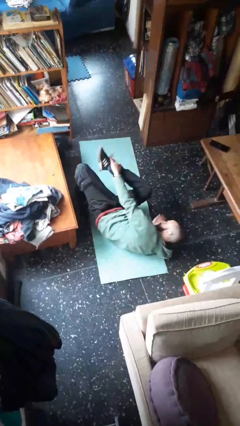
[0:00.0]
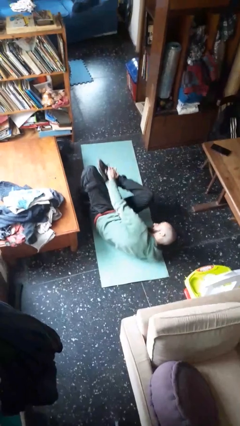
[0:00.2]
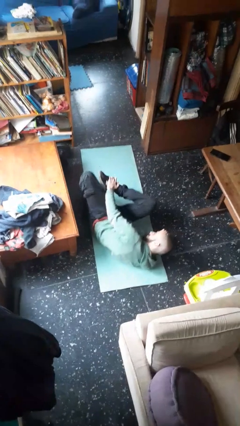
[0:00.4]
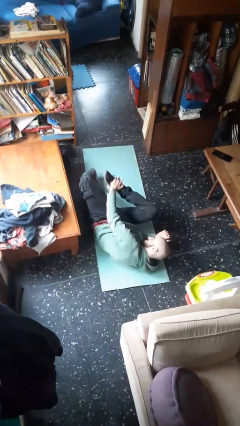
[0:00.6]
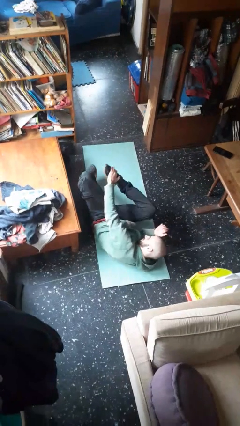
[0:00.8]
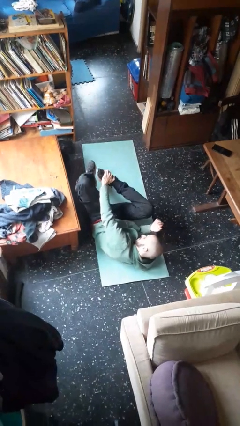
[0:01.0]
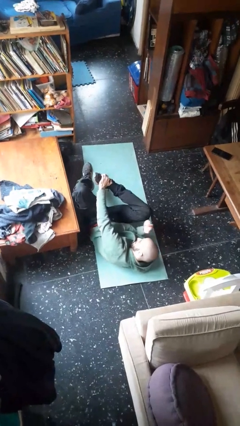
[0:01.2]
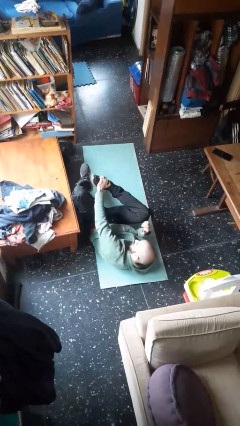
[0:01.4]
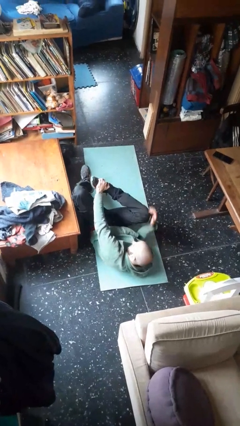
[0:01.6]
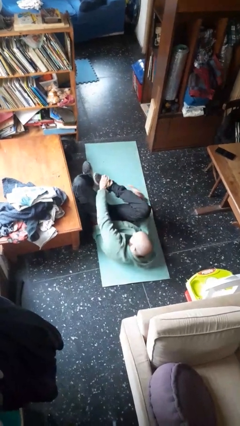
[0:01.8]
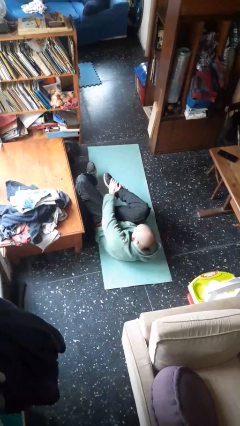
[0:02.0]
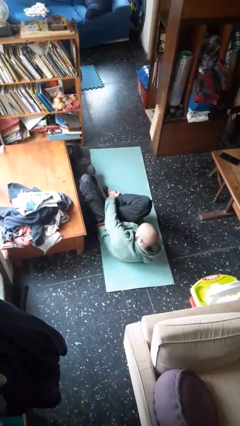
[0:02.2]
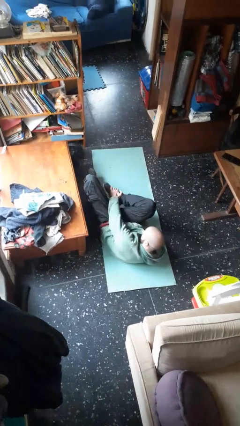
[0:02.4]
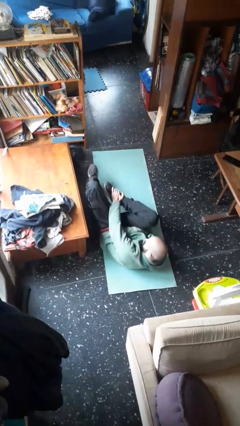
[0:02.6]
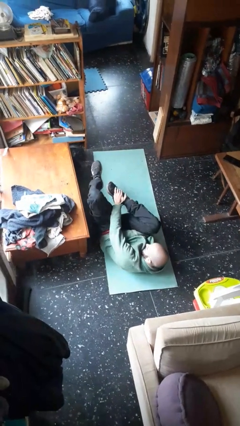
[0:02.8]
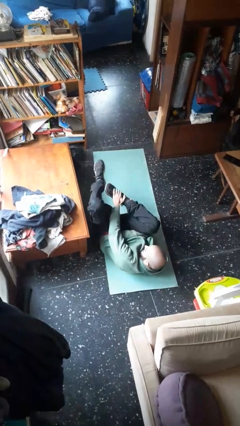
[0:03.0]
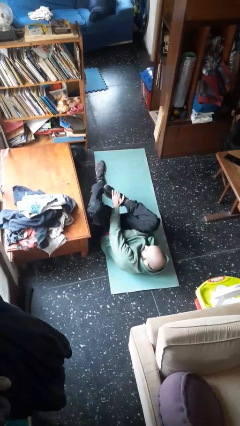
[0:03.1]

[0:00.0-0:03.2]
person lies down on floor

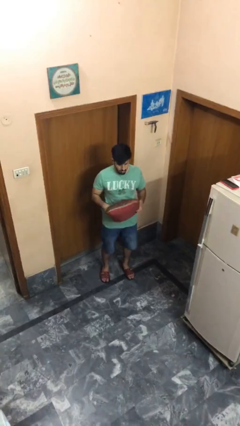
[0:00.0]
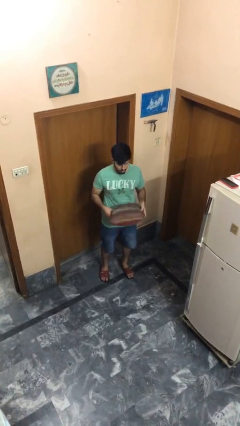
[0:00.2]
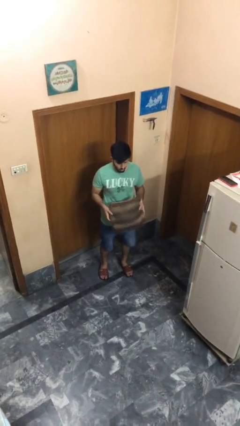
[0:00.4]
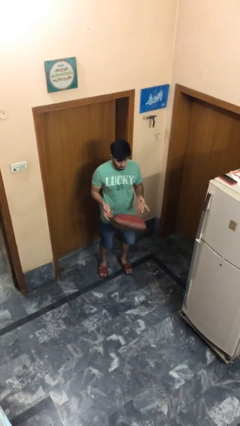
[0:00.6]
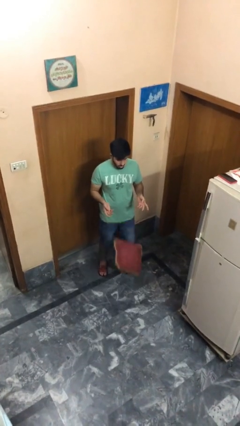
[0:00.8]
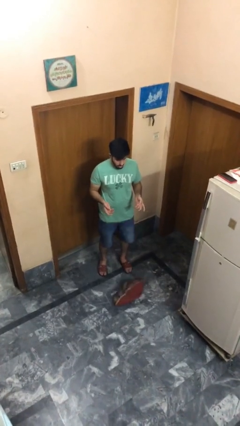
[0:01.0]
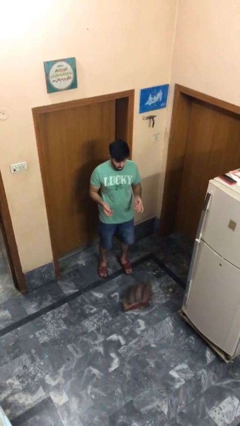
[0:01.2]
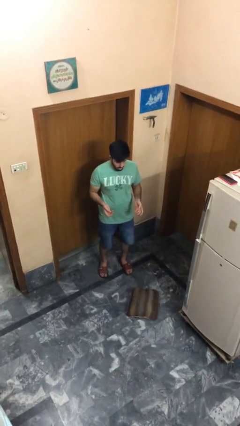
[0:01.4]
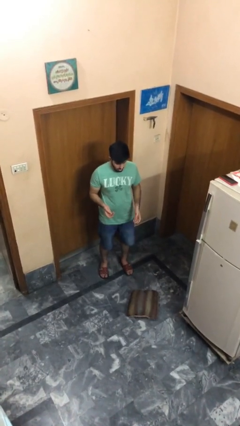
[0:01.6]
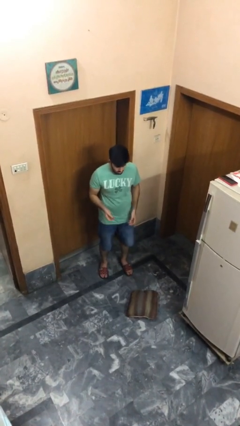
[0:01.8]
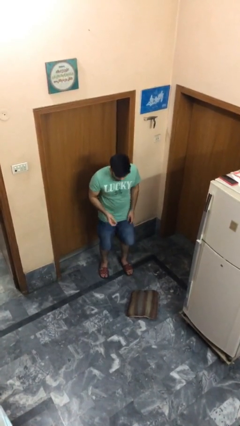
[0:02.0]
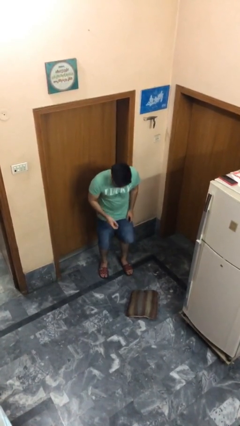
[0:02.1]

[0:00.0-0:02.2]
person drops object

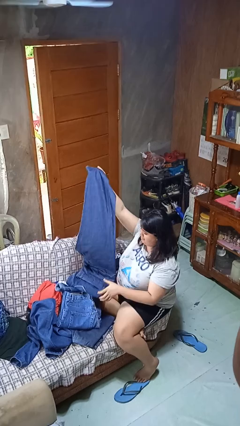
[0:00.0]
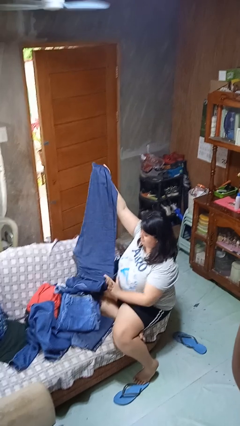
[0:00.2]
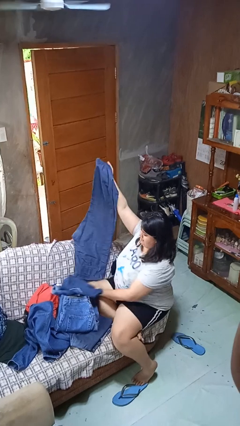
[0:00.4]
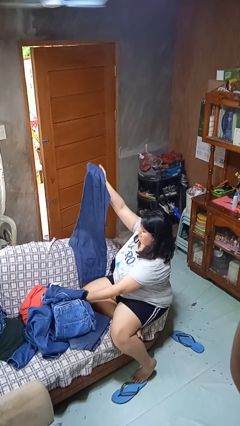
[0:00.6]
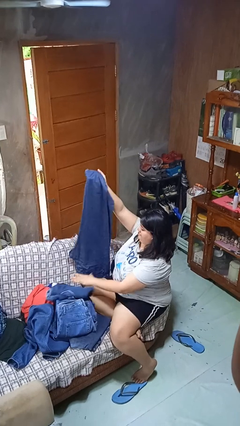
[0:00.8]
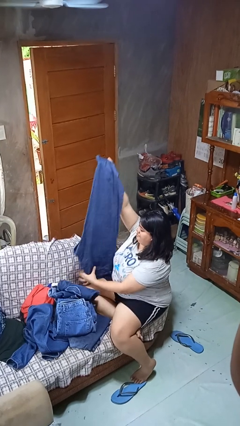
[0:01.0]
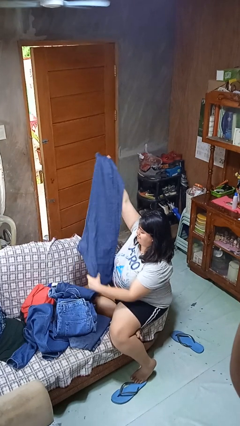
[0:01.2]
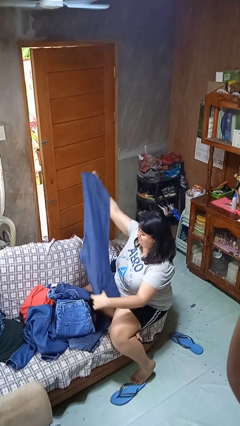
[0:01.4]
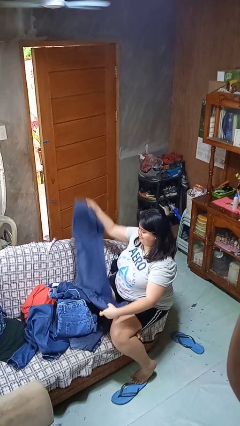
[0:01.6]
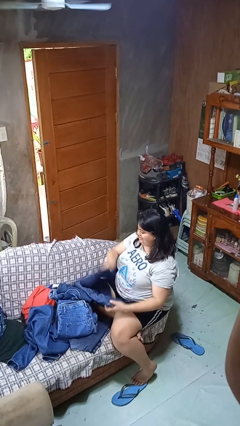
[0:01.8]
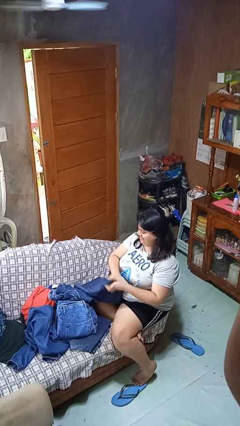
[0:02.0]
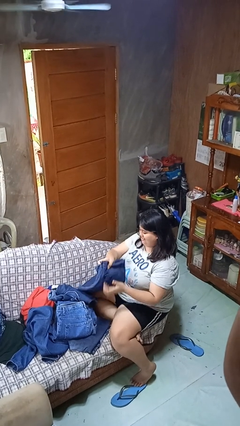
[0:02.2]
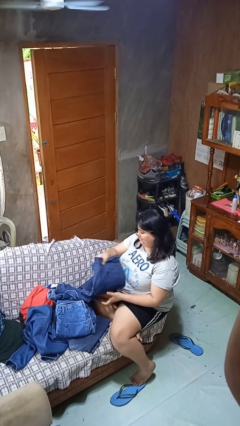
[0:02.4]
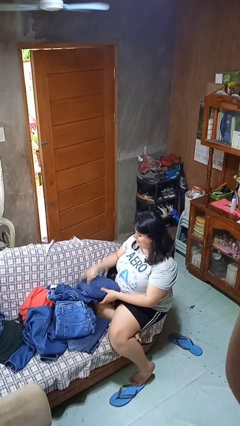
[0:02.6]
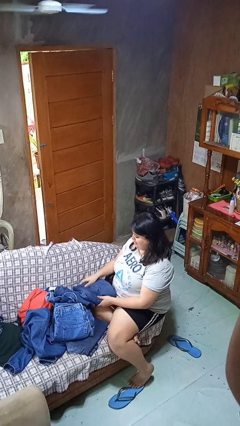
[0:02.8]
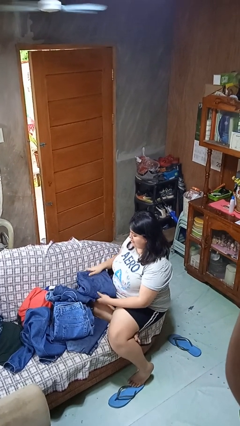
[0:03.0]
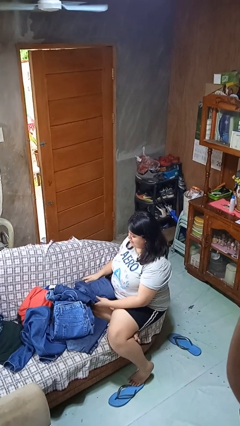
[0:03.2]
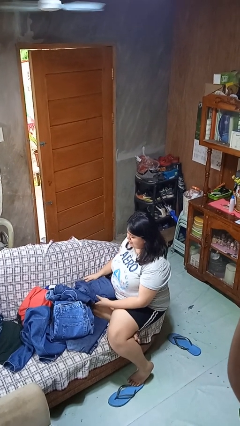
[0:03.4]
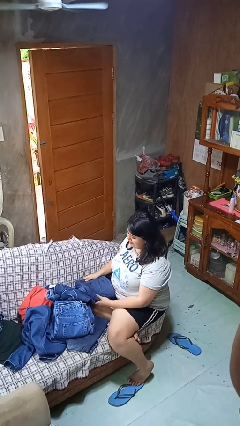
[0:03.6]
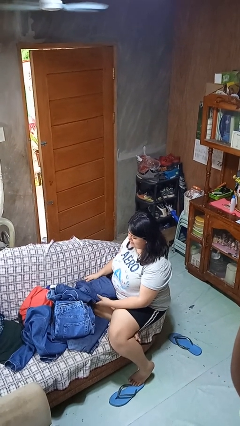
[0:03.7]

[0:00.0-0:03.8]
person folds pants

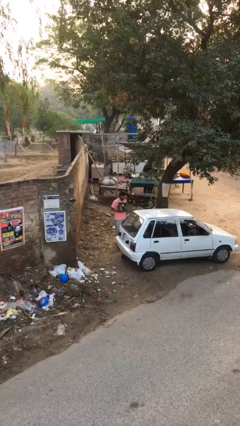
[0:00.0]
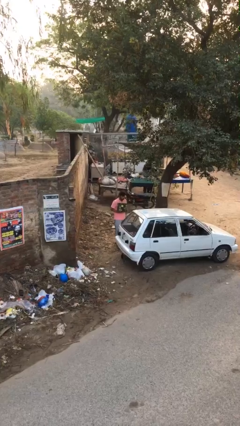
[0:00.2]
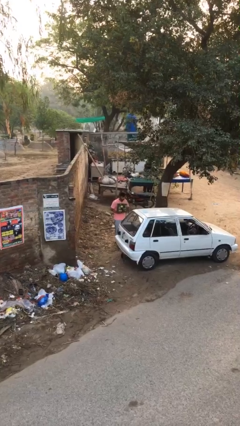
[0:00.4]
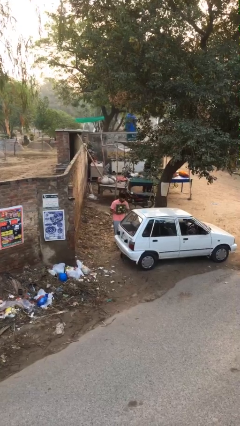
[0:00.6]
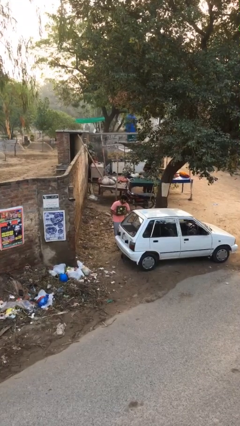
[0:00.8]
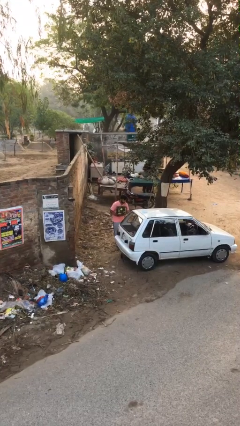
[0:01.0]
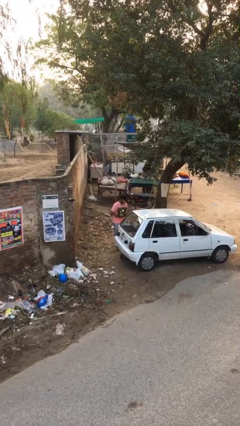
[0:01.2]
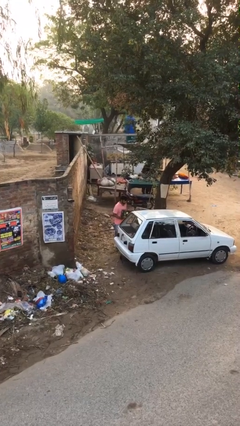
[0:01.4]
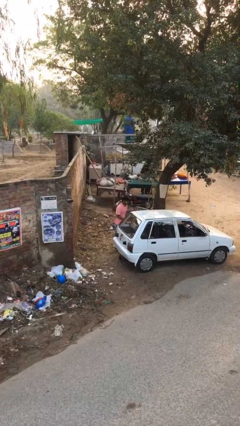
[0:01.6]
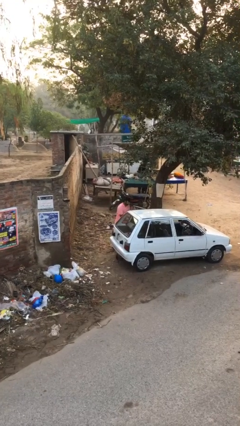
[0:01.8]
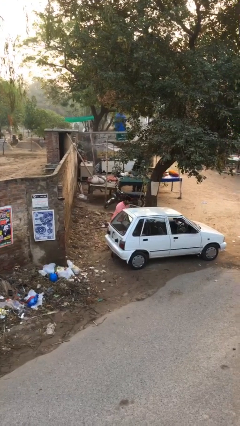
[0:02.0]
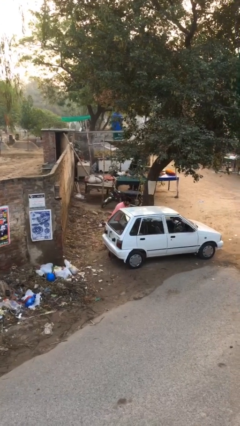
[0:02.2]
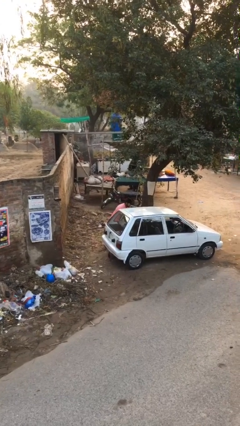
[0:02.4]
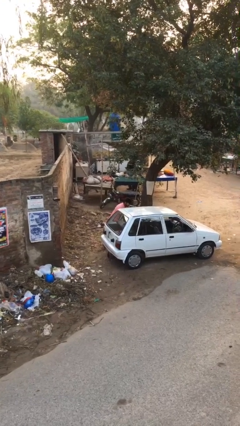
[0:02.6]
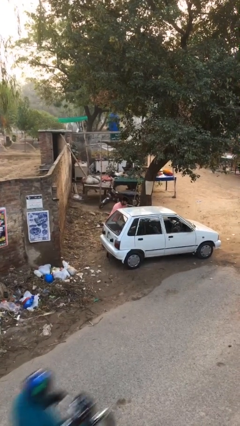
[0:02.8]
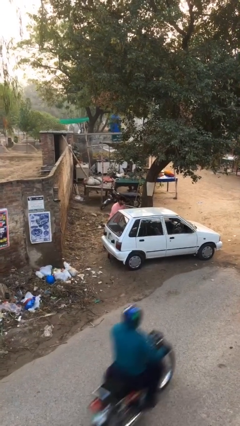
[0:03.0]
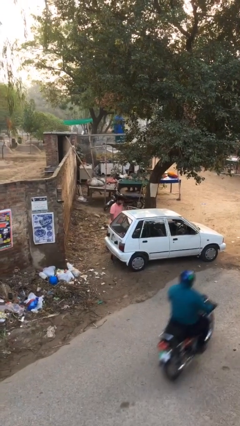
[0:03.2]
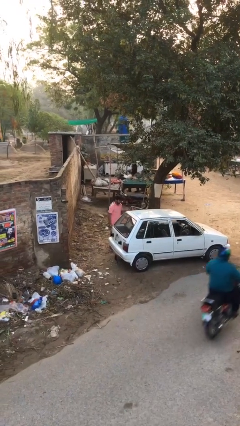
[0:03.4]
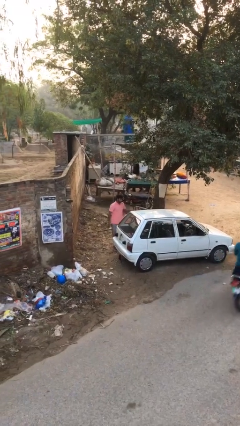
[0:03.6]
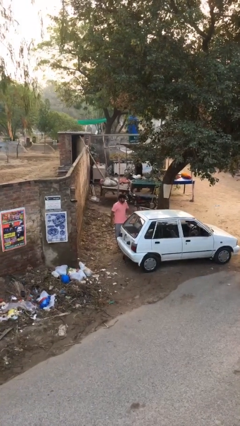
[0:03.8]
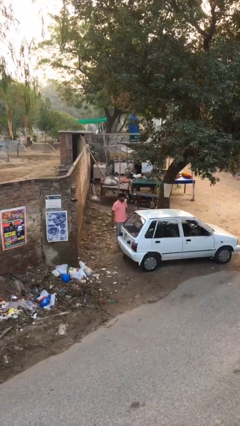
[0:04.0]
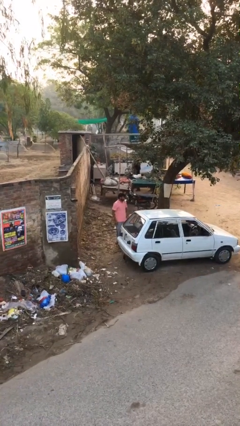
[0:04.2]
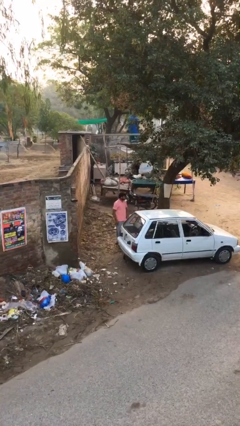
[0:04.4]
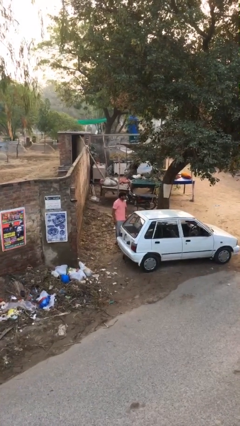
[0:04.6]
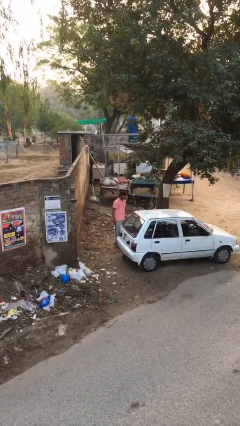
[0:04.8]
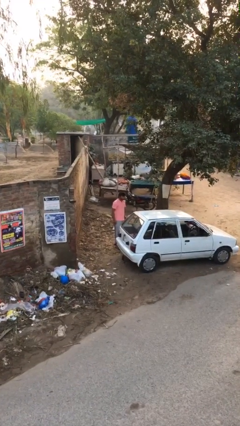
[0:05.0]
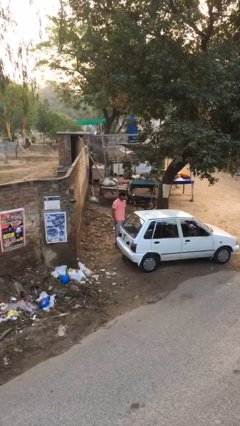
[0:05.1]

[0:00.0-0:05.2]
person loads car

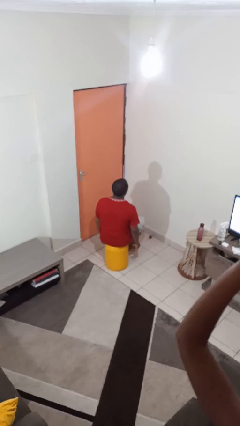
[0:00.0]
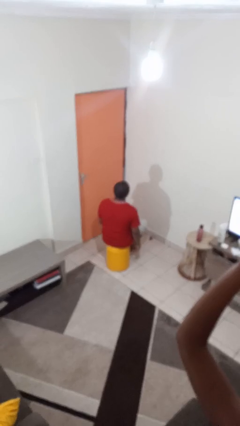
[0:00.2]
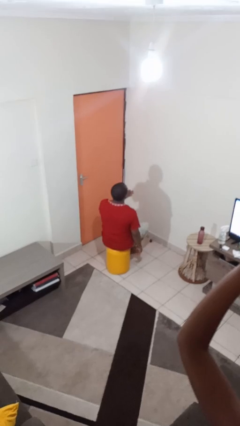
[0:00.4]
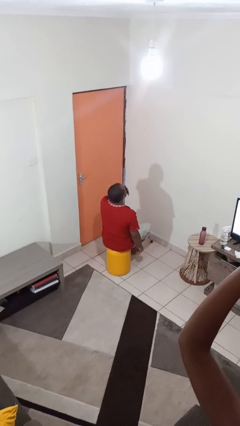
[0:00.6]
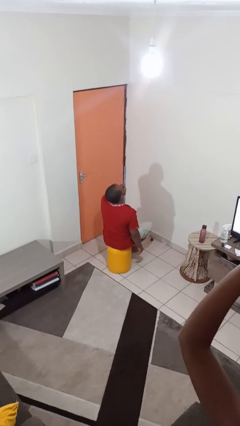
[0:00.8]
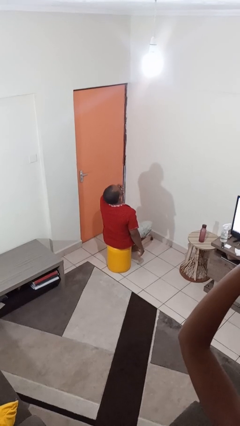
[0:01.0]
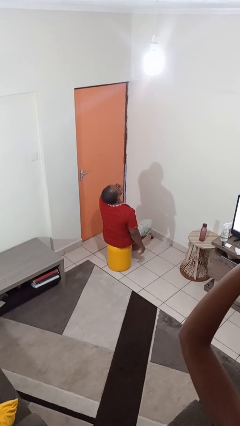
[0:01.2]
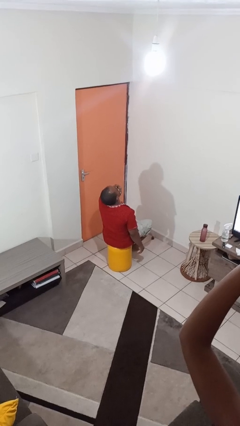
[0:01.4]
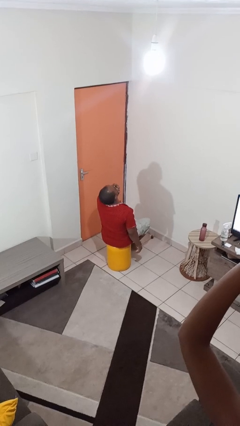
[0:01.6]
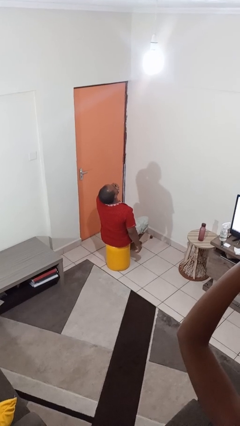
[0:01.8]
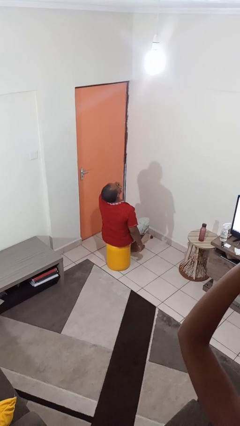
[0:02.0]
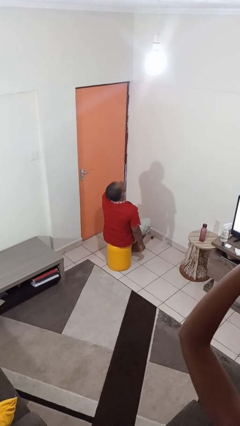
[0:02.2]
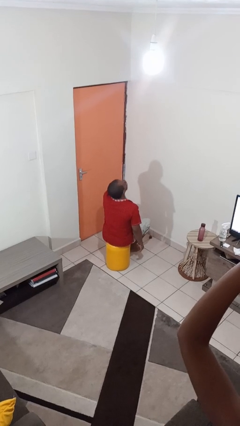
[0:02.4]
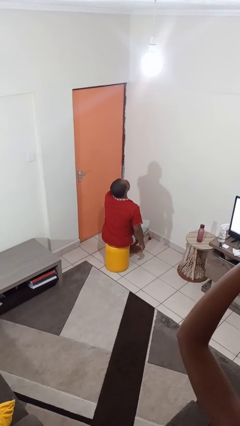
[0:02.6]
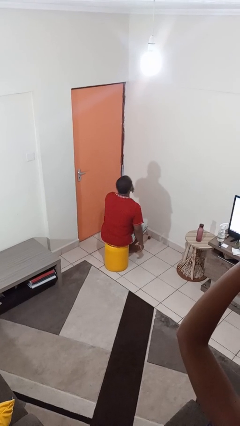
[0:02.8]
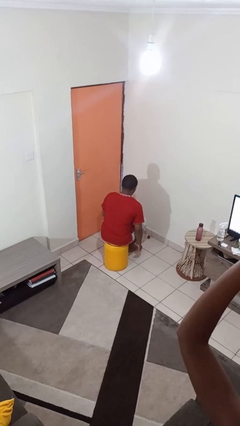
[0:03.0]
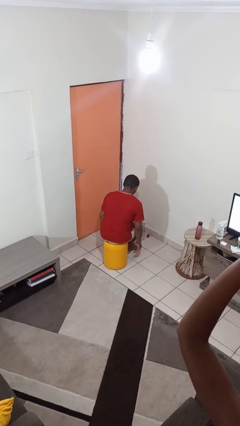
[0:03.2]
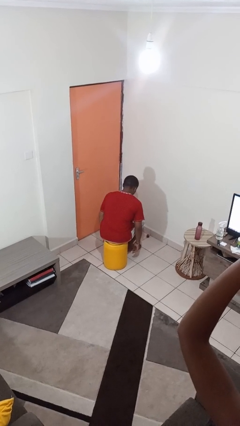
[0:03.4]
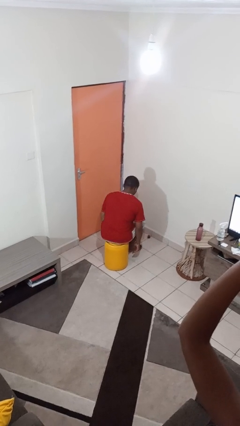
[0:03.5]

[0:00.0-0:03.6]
person yawns
